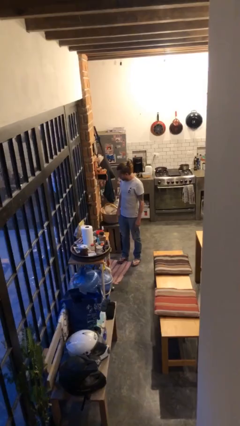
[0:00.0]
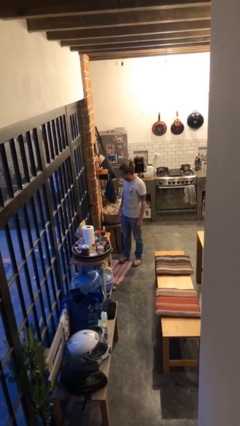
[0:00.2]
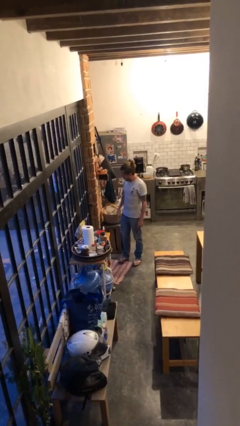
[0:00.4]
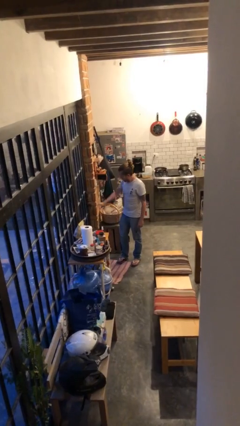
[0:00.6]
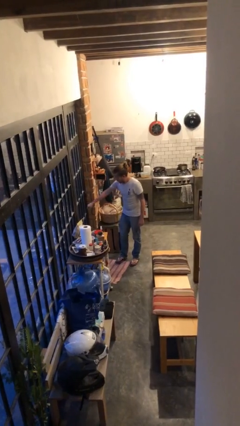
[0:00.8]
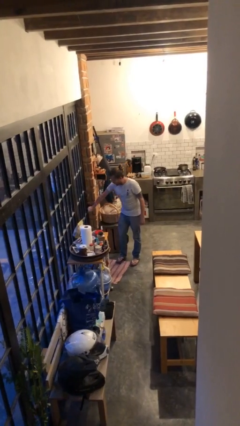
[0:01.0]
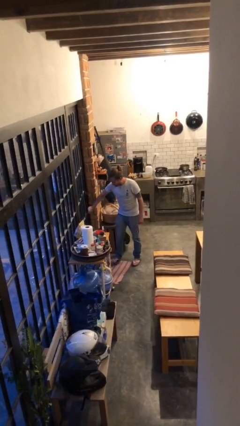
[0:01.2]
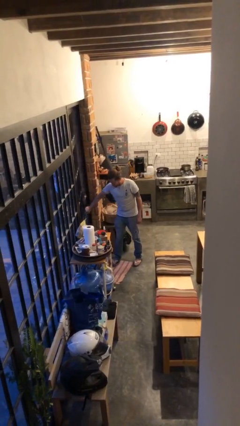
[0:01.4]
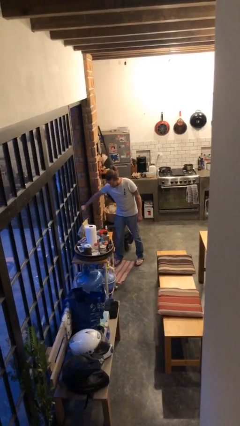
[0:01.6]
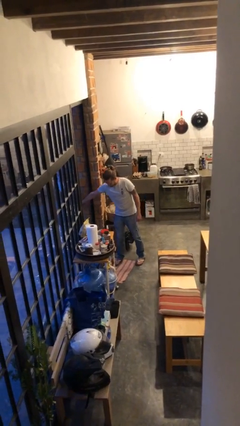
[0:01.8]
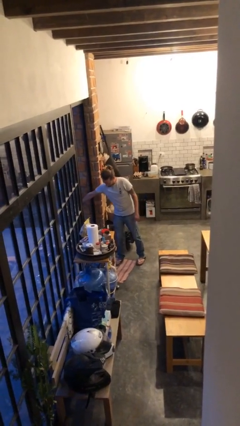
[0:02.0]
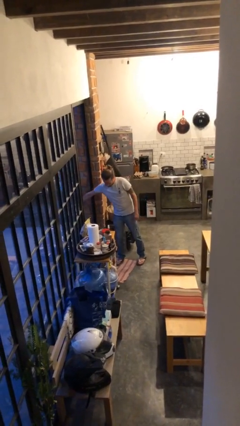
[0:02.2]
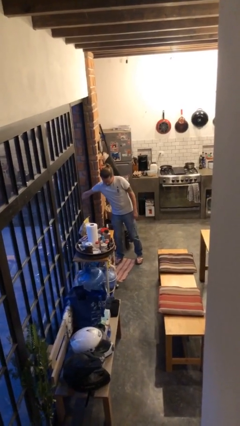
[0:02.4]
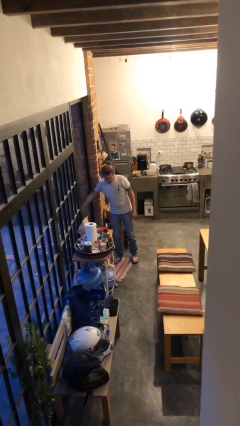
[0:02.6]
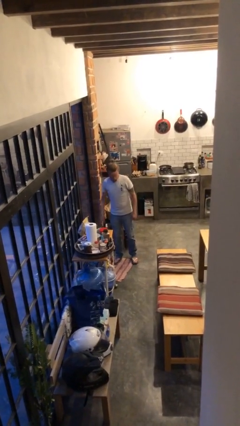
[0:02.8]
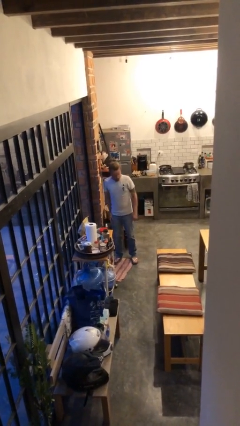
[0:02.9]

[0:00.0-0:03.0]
person opens facility door

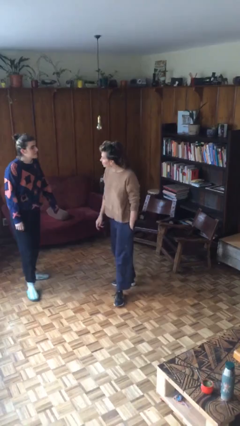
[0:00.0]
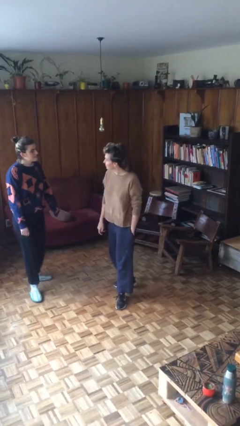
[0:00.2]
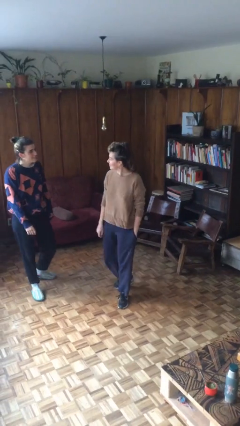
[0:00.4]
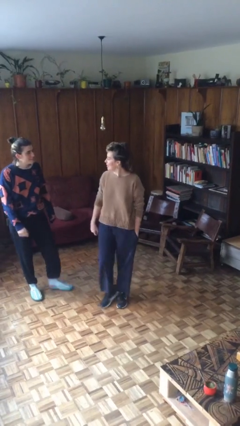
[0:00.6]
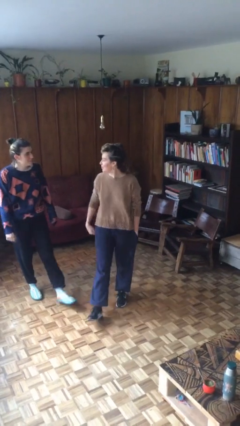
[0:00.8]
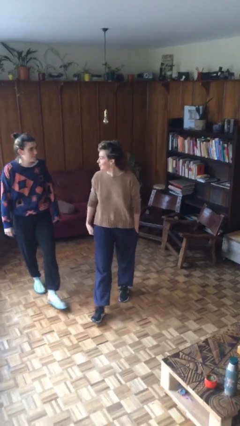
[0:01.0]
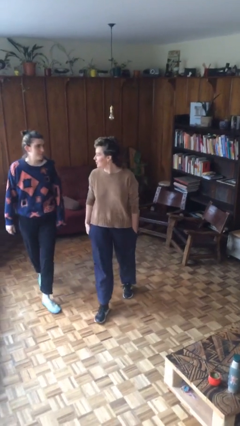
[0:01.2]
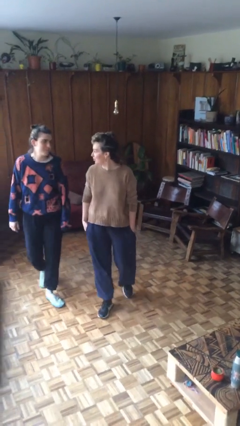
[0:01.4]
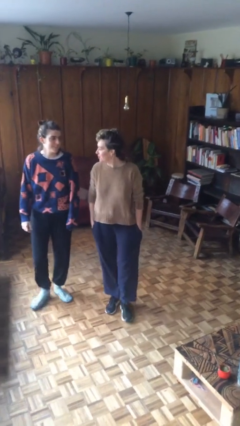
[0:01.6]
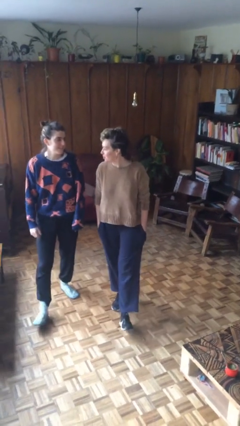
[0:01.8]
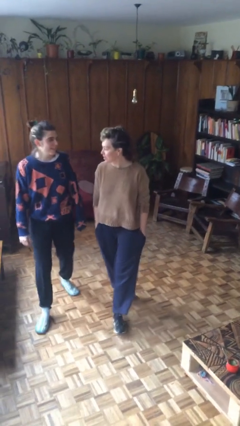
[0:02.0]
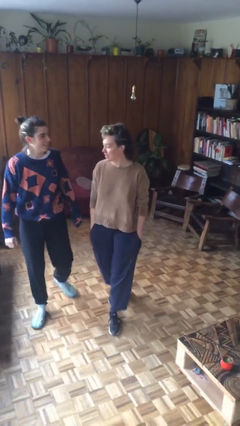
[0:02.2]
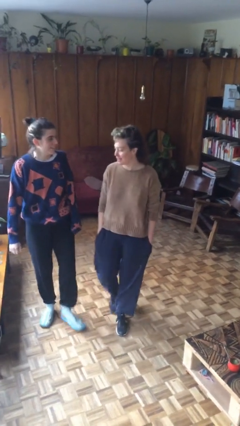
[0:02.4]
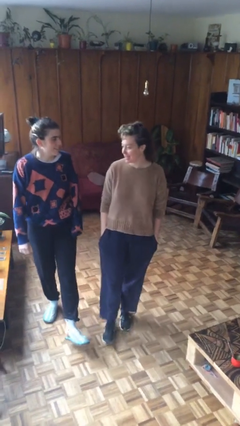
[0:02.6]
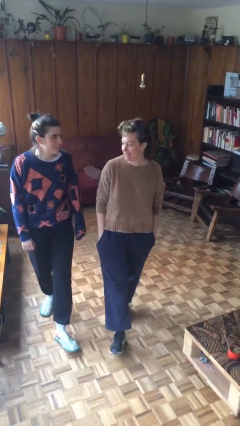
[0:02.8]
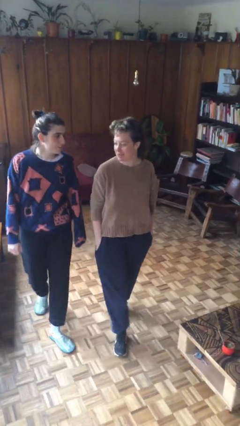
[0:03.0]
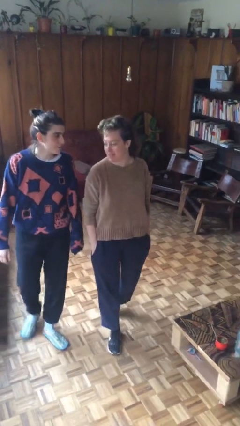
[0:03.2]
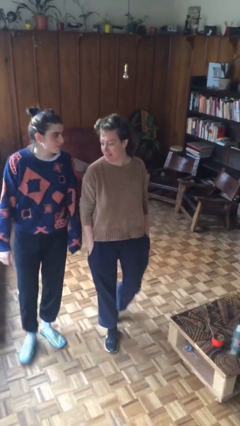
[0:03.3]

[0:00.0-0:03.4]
person talks to person

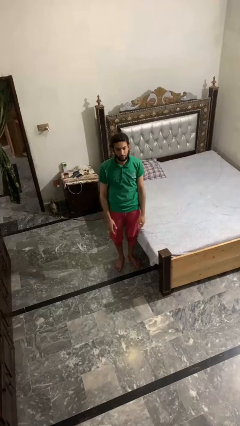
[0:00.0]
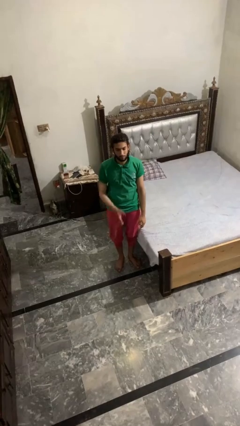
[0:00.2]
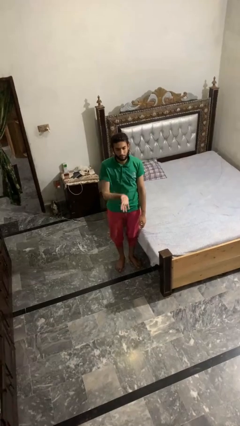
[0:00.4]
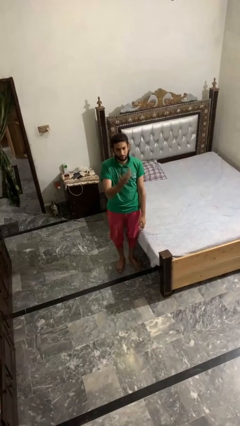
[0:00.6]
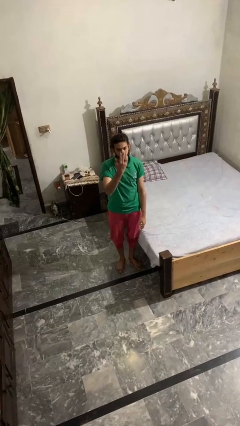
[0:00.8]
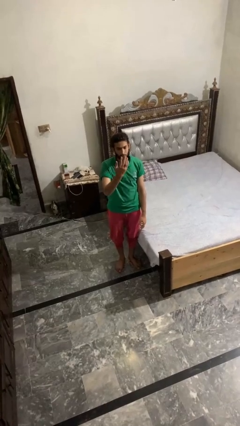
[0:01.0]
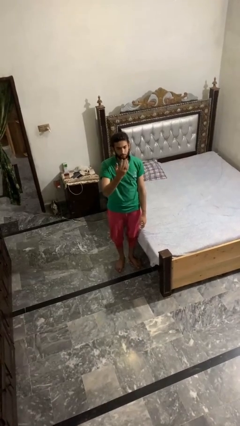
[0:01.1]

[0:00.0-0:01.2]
person gestures swipe up

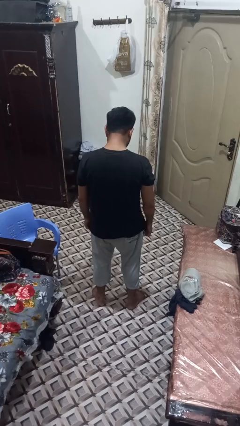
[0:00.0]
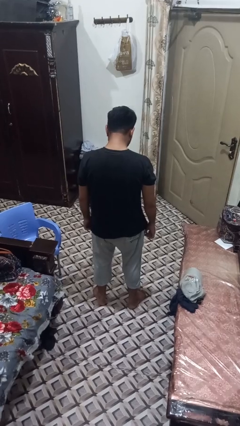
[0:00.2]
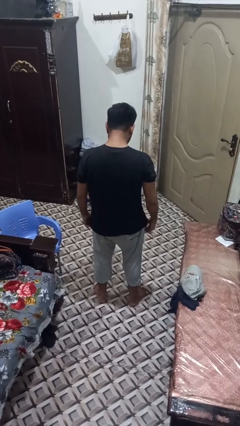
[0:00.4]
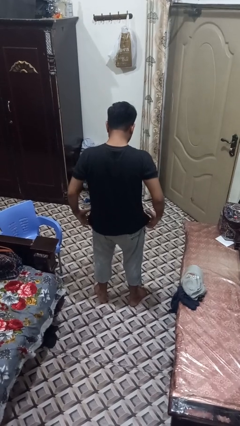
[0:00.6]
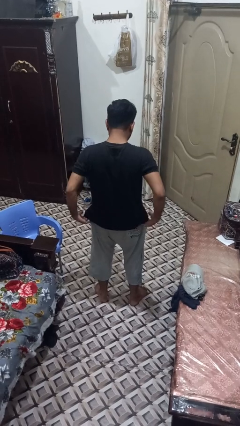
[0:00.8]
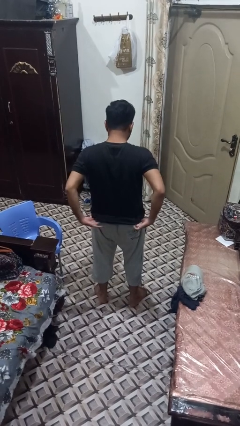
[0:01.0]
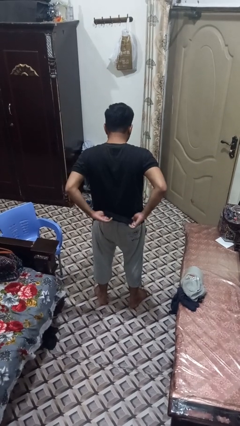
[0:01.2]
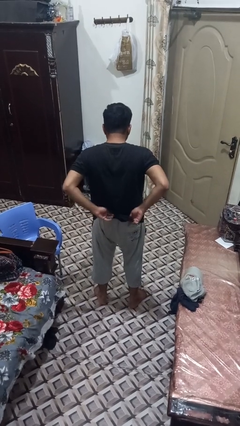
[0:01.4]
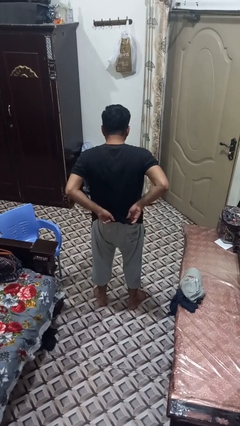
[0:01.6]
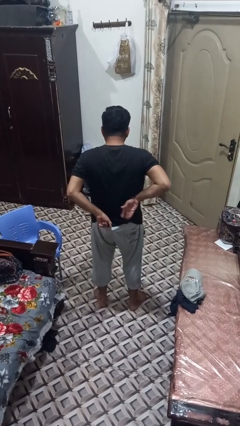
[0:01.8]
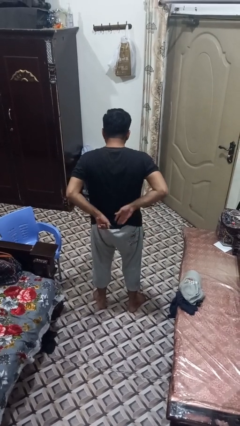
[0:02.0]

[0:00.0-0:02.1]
person tucks in shirt

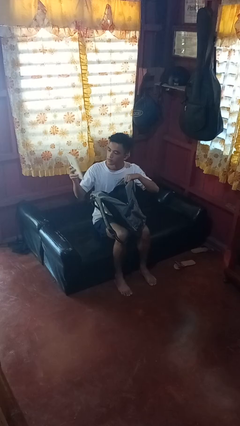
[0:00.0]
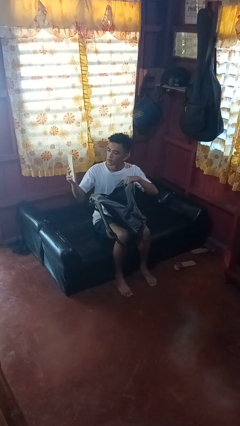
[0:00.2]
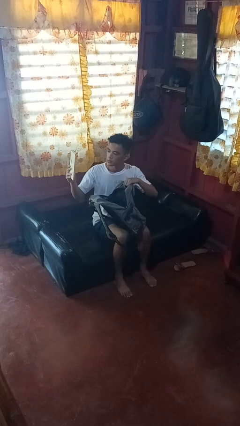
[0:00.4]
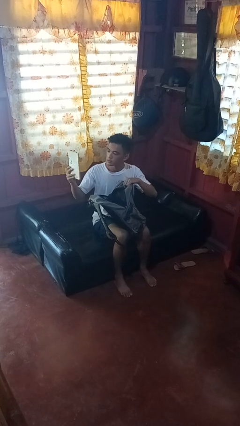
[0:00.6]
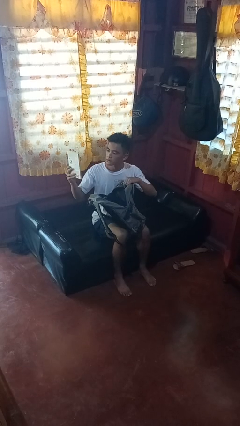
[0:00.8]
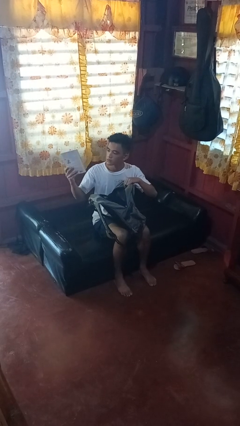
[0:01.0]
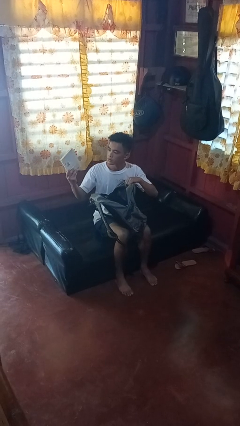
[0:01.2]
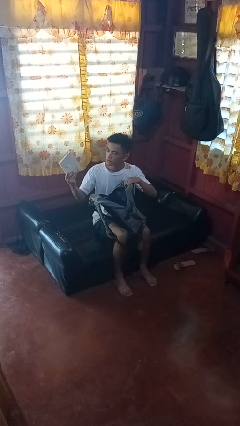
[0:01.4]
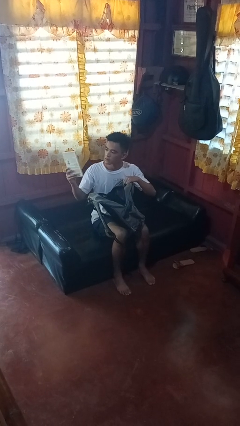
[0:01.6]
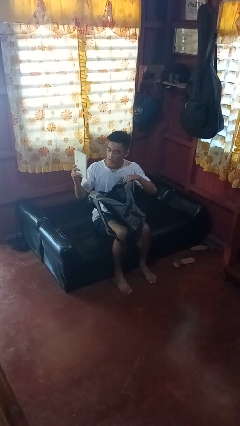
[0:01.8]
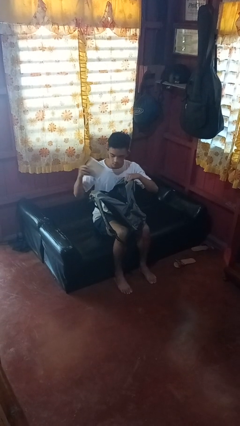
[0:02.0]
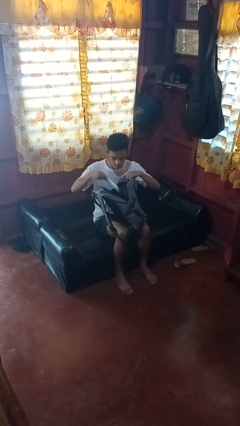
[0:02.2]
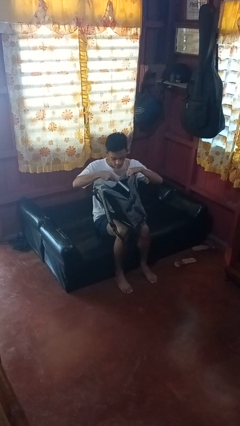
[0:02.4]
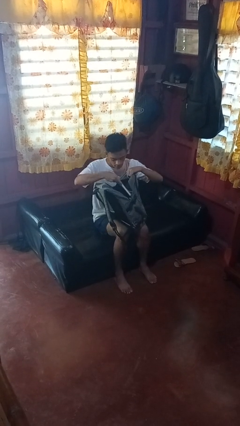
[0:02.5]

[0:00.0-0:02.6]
person takes object from backpack

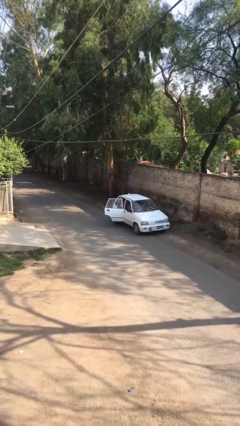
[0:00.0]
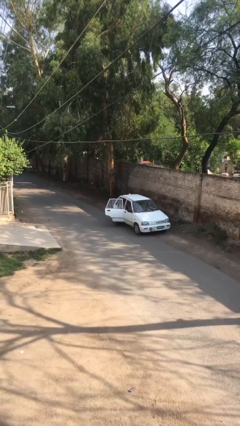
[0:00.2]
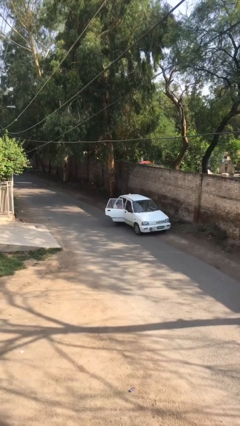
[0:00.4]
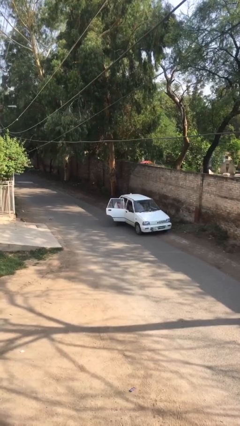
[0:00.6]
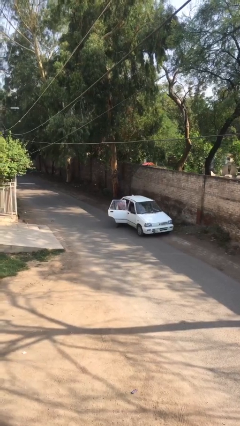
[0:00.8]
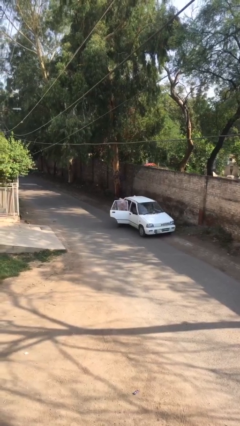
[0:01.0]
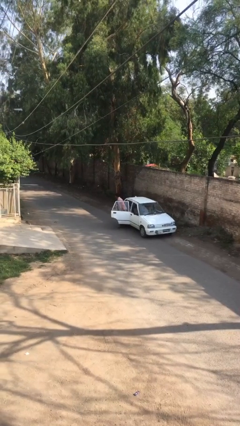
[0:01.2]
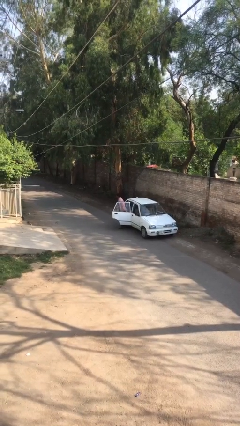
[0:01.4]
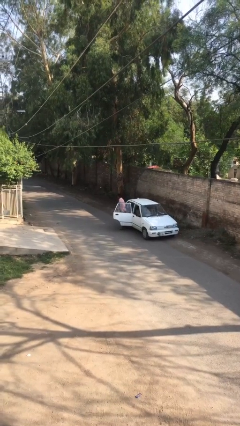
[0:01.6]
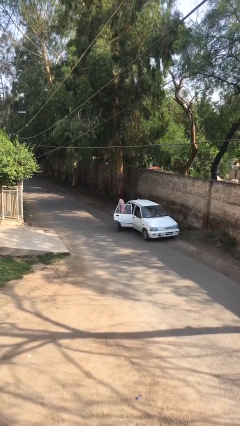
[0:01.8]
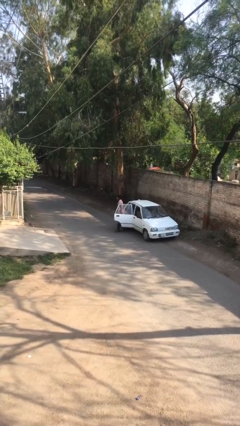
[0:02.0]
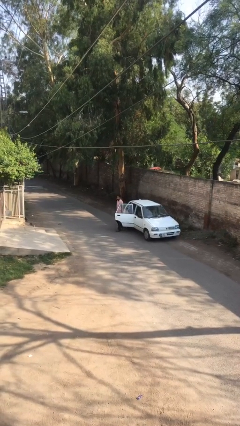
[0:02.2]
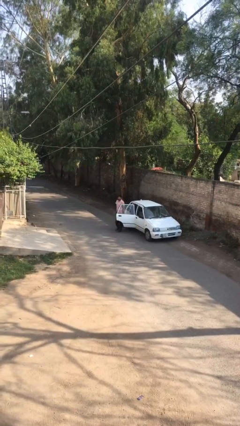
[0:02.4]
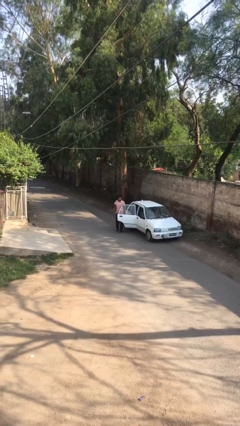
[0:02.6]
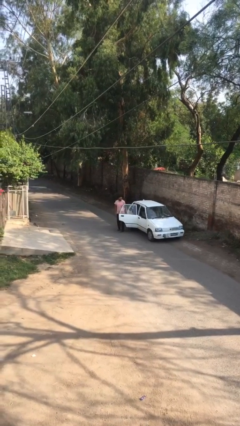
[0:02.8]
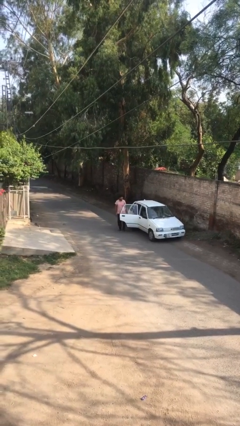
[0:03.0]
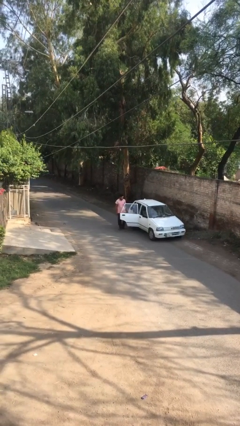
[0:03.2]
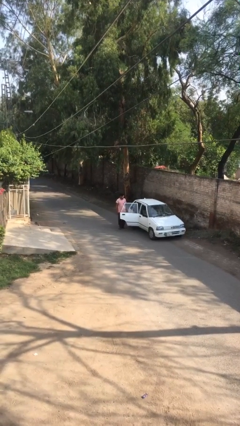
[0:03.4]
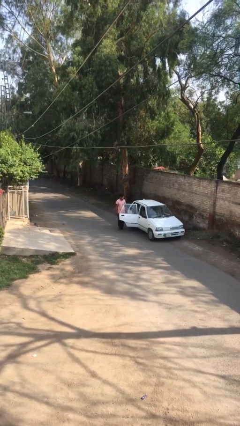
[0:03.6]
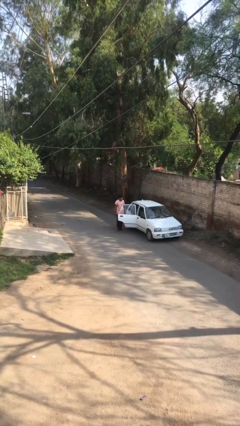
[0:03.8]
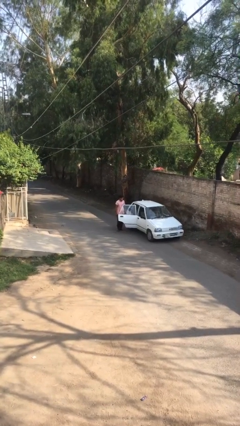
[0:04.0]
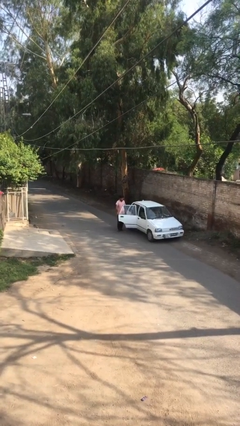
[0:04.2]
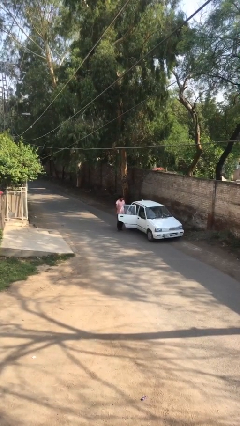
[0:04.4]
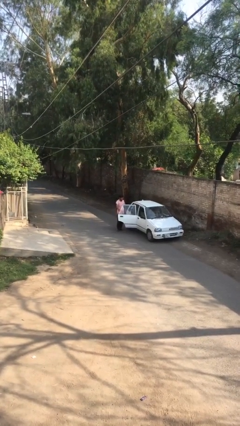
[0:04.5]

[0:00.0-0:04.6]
person exits car

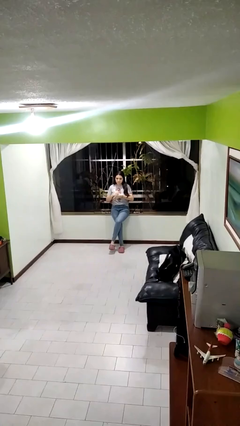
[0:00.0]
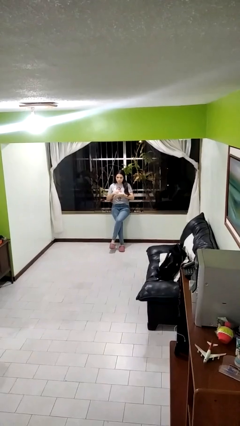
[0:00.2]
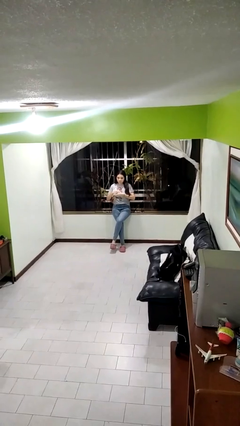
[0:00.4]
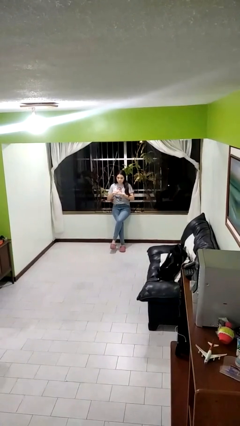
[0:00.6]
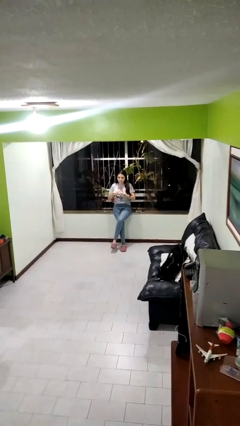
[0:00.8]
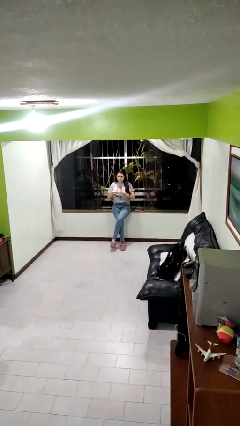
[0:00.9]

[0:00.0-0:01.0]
person takes off ring
